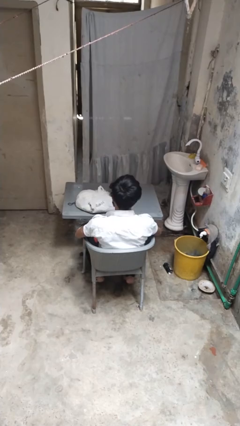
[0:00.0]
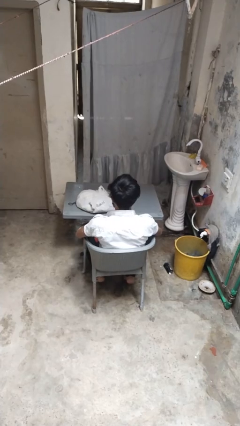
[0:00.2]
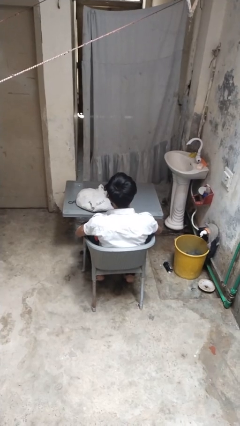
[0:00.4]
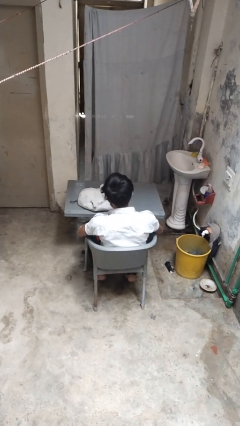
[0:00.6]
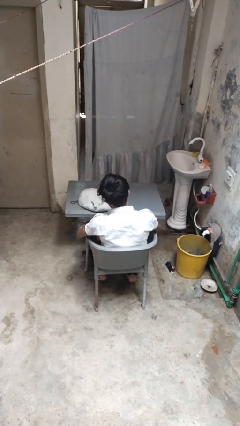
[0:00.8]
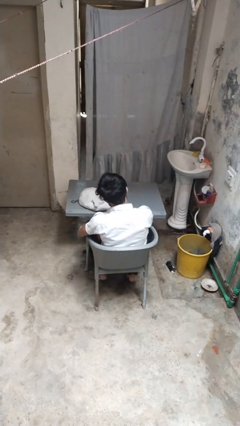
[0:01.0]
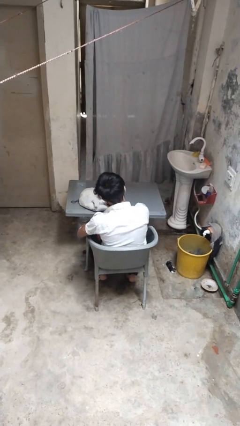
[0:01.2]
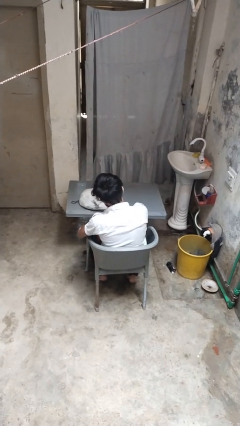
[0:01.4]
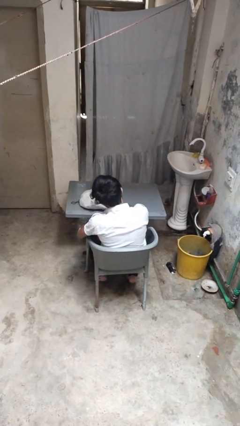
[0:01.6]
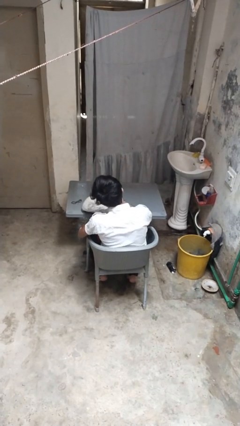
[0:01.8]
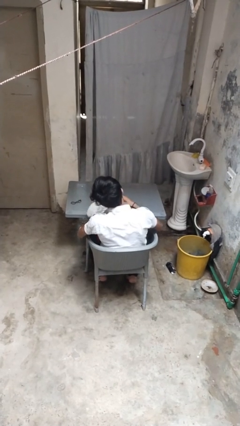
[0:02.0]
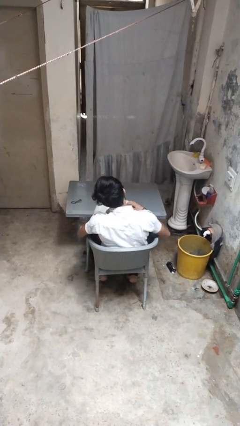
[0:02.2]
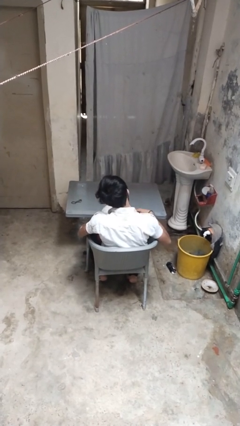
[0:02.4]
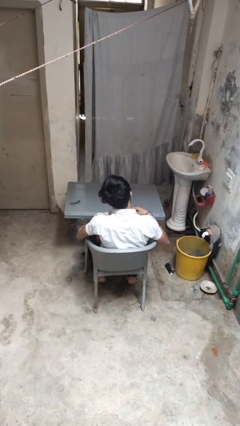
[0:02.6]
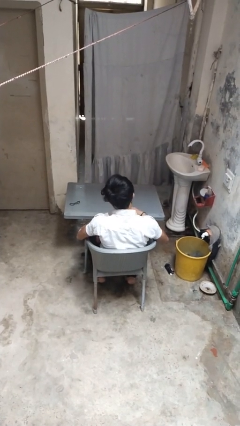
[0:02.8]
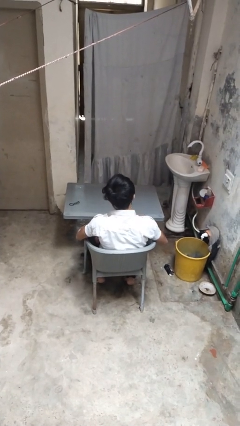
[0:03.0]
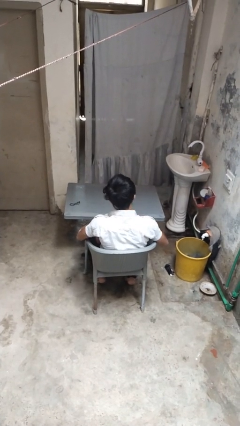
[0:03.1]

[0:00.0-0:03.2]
person picks up object from table

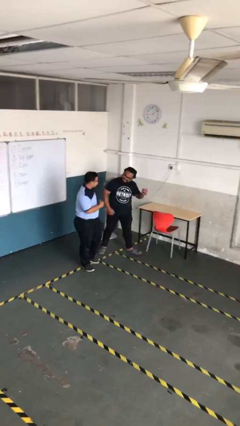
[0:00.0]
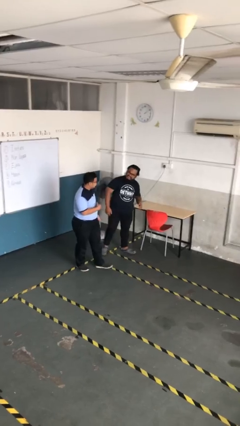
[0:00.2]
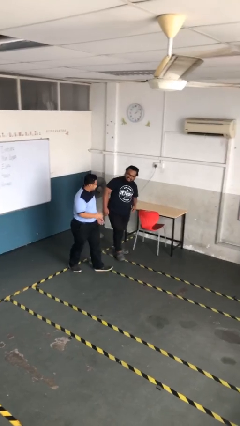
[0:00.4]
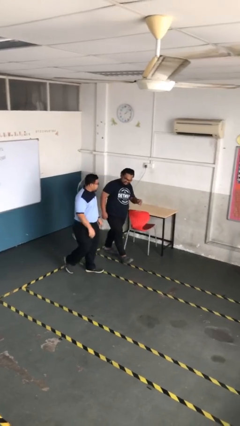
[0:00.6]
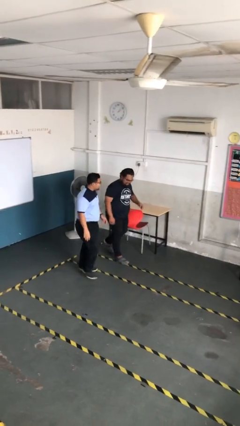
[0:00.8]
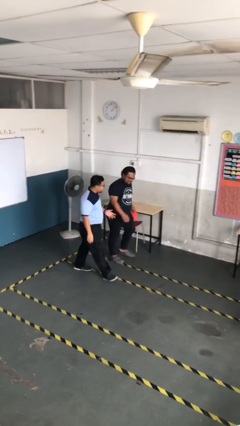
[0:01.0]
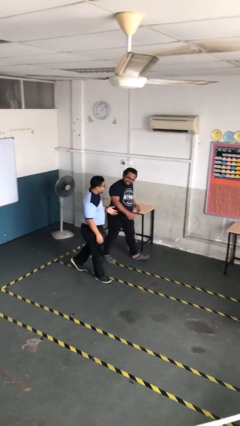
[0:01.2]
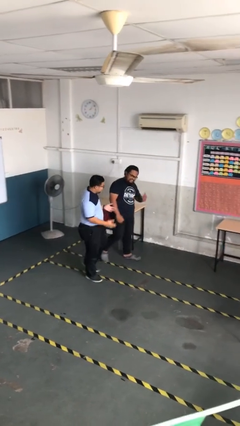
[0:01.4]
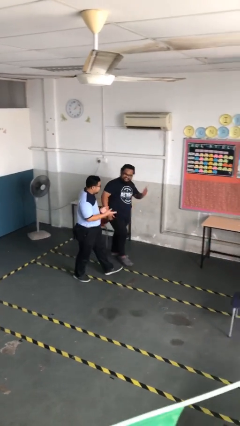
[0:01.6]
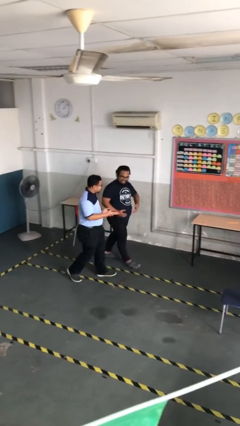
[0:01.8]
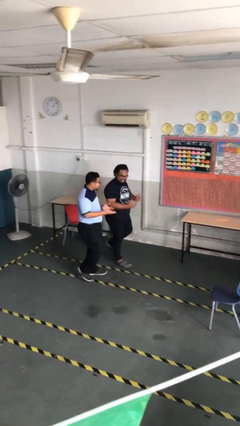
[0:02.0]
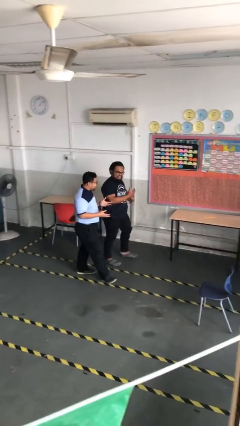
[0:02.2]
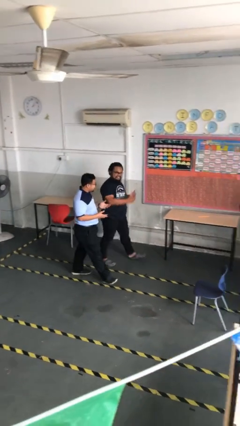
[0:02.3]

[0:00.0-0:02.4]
person talks to person

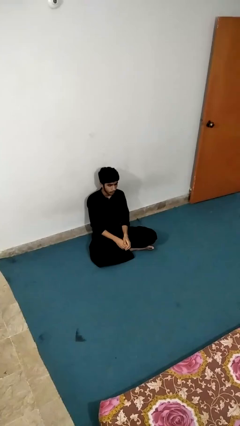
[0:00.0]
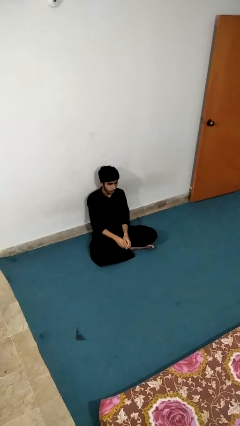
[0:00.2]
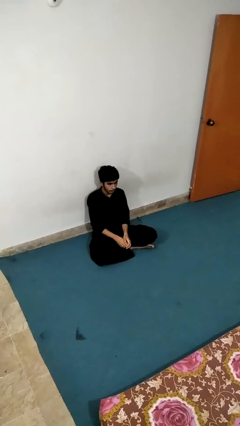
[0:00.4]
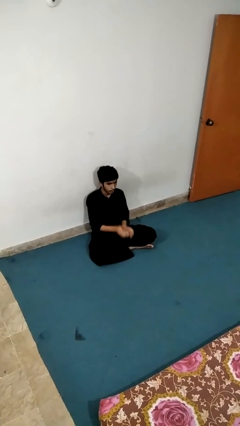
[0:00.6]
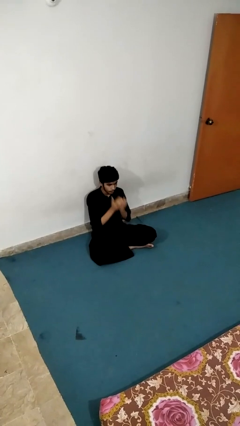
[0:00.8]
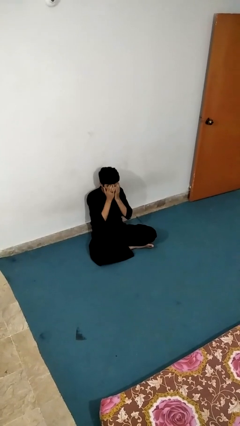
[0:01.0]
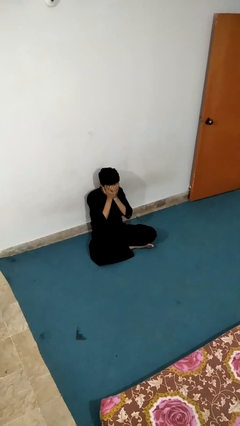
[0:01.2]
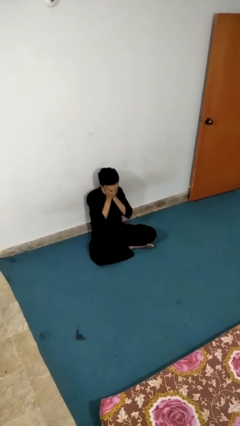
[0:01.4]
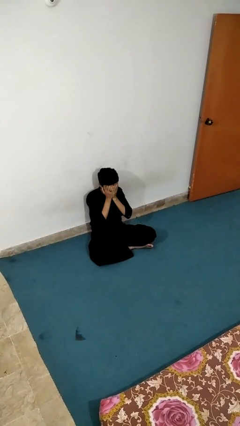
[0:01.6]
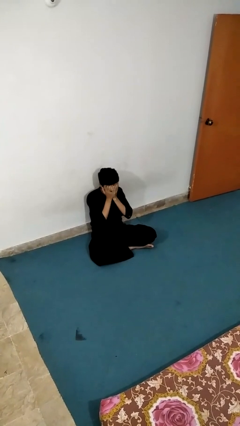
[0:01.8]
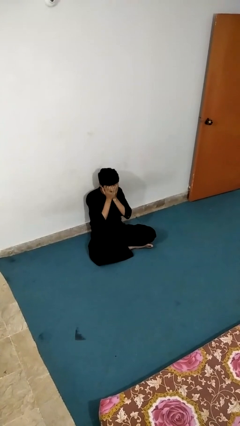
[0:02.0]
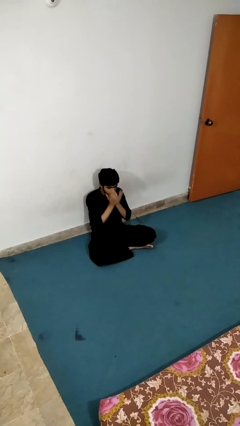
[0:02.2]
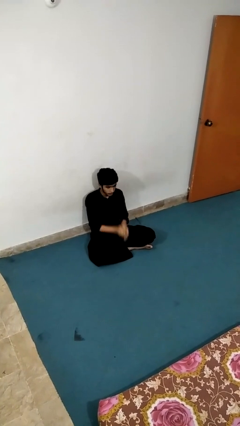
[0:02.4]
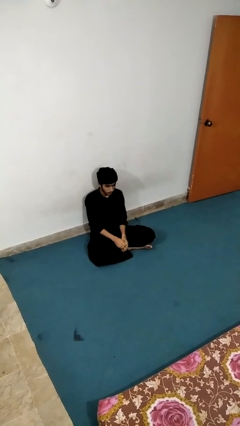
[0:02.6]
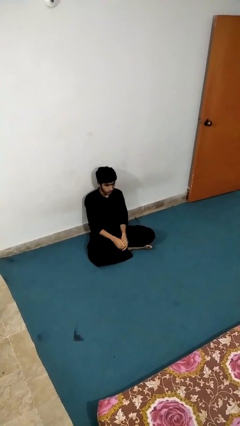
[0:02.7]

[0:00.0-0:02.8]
person covers face with hands

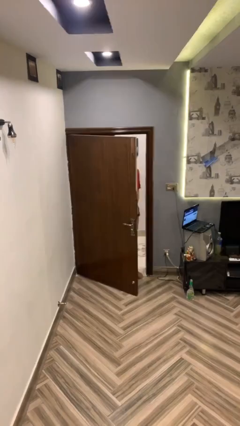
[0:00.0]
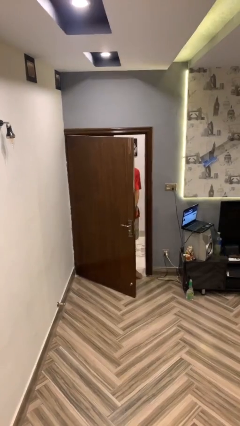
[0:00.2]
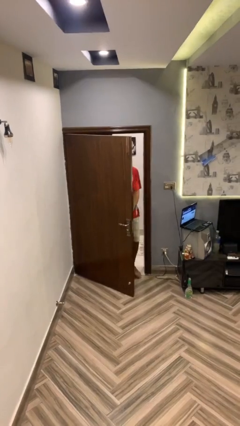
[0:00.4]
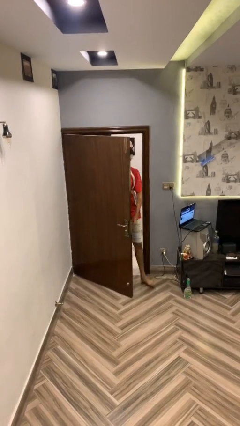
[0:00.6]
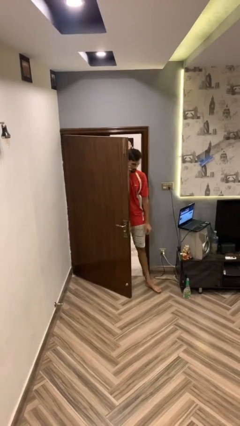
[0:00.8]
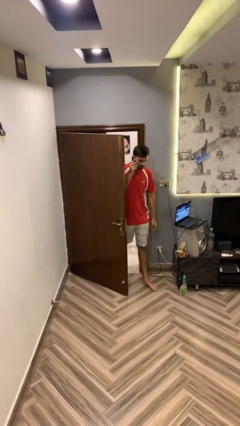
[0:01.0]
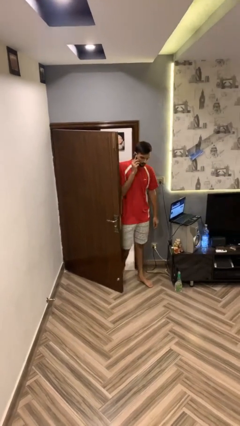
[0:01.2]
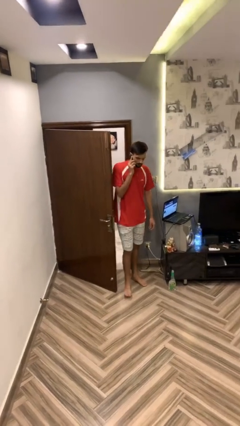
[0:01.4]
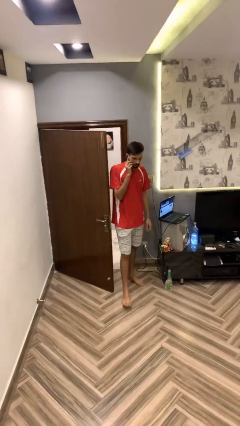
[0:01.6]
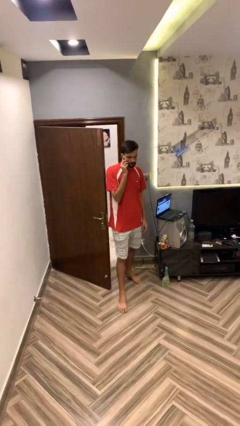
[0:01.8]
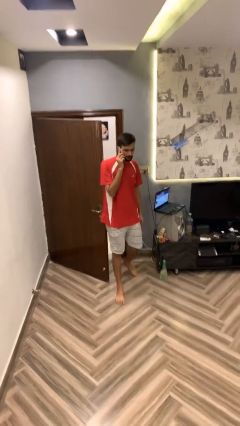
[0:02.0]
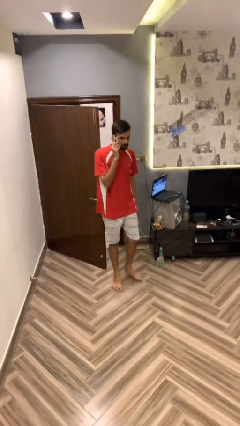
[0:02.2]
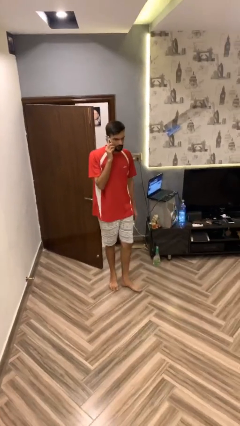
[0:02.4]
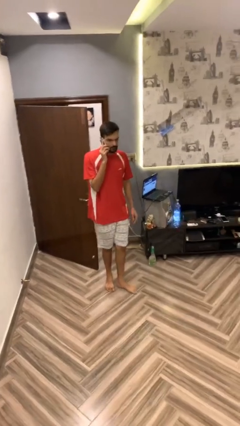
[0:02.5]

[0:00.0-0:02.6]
person enters scene through structure

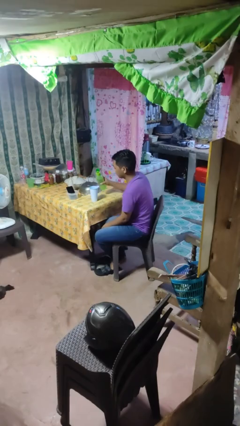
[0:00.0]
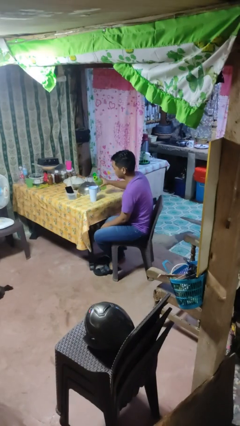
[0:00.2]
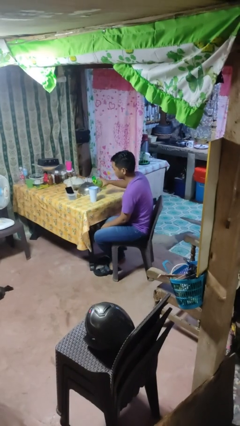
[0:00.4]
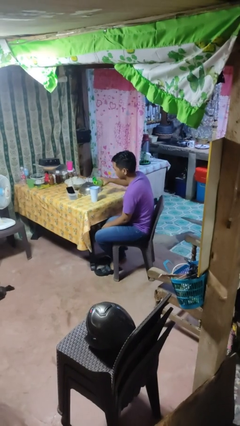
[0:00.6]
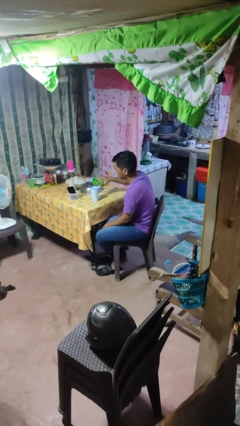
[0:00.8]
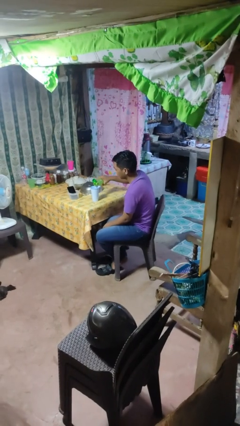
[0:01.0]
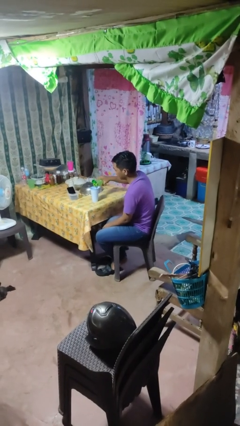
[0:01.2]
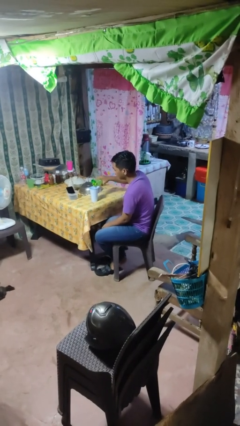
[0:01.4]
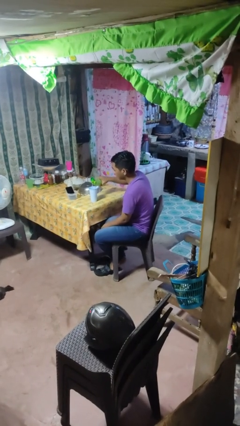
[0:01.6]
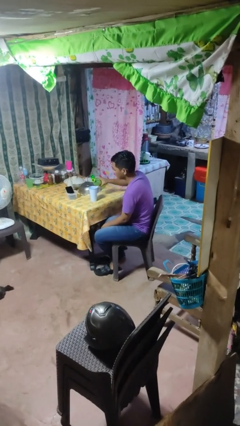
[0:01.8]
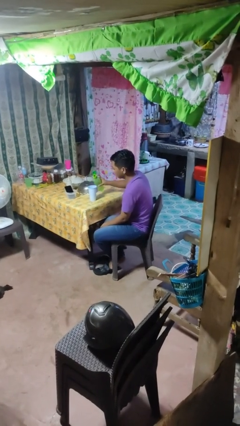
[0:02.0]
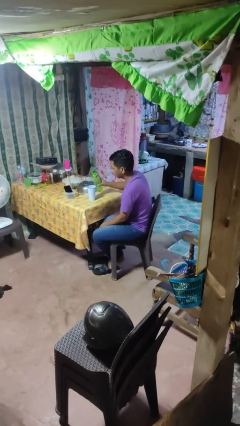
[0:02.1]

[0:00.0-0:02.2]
person pours liquid into cup

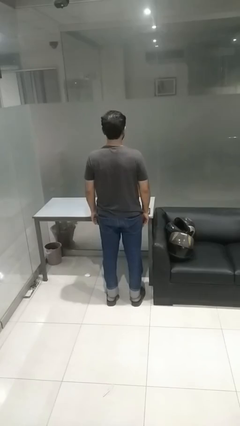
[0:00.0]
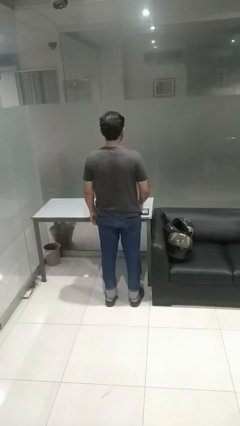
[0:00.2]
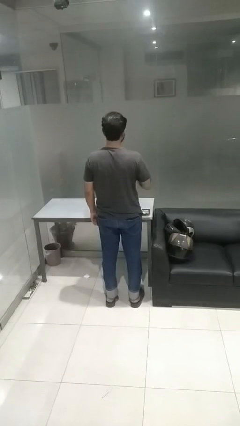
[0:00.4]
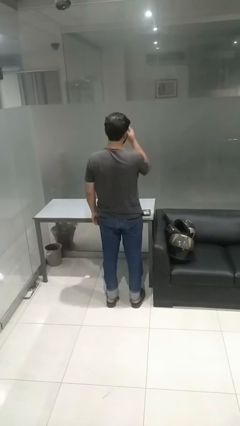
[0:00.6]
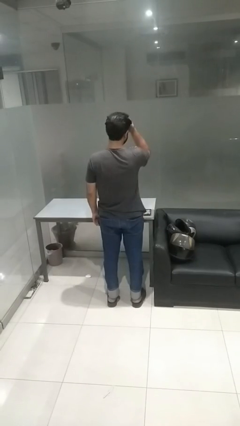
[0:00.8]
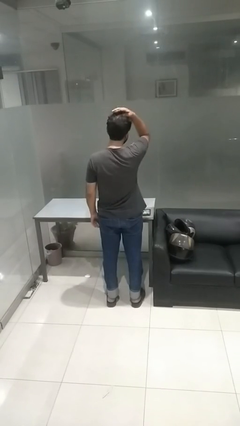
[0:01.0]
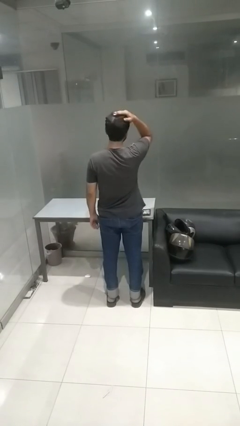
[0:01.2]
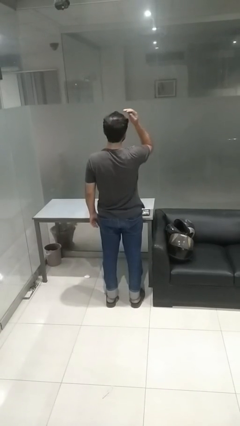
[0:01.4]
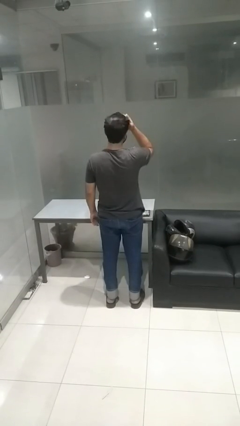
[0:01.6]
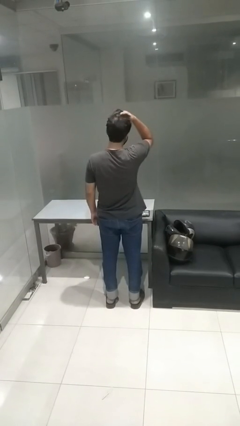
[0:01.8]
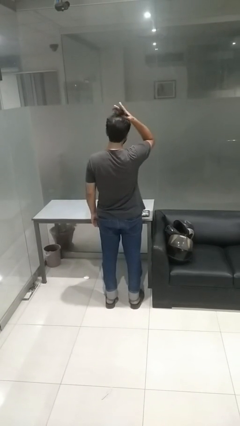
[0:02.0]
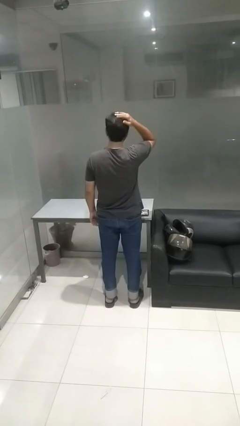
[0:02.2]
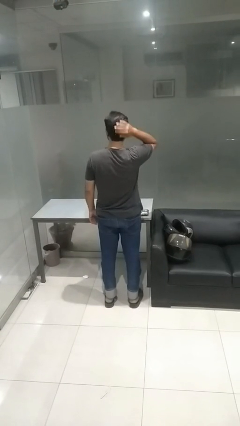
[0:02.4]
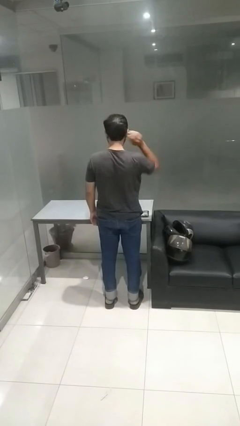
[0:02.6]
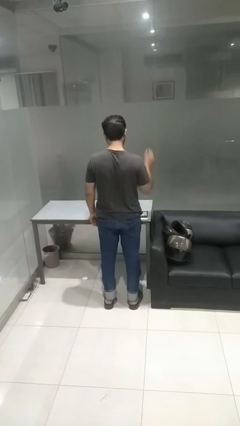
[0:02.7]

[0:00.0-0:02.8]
person strokes hair

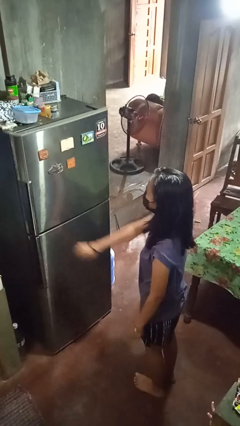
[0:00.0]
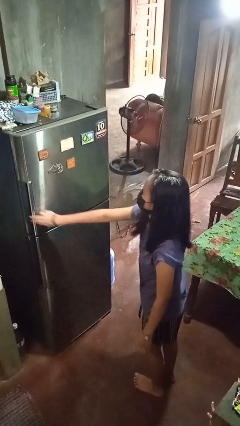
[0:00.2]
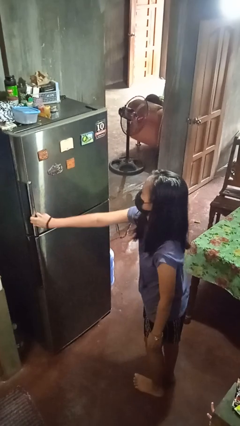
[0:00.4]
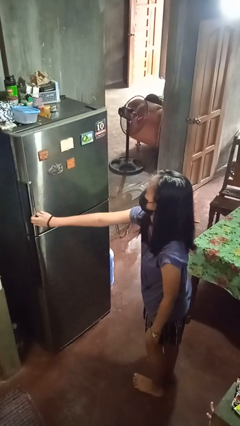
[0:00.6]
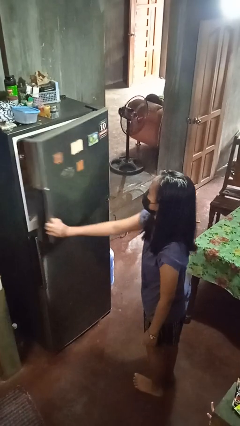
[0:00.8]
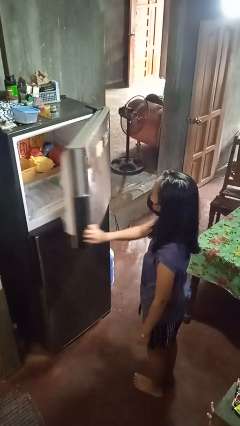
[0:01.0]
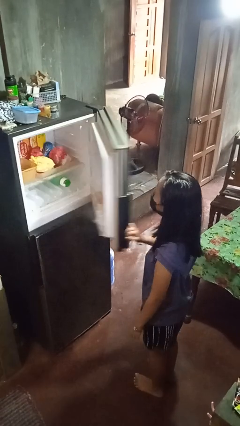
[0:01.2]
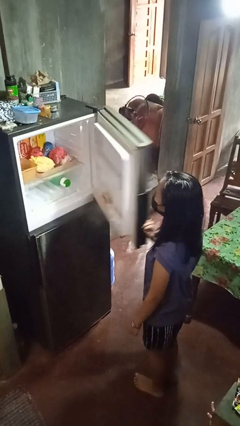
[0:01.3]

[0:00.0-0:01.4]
person opens refrigerator
